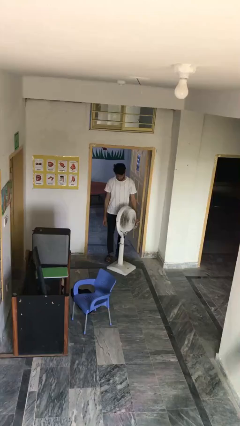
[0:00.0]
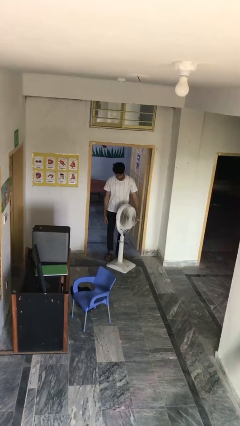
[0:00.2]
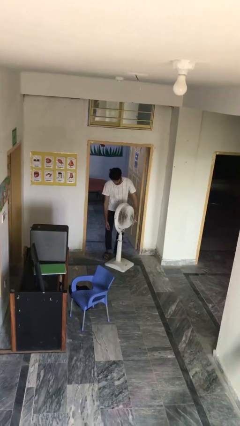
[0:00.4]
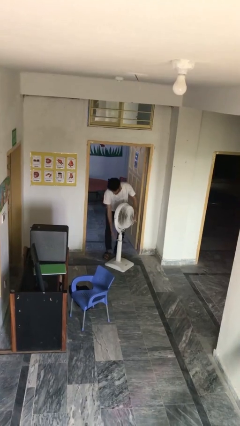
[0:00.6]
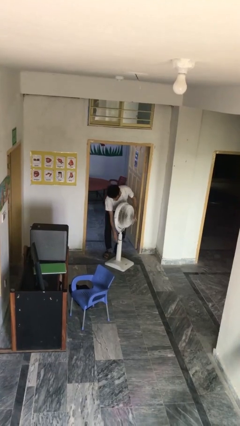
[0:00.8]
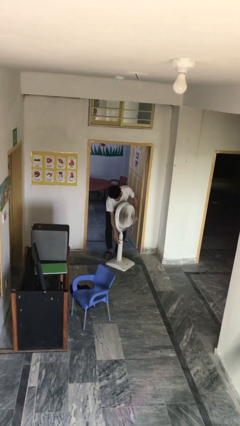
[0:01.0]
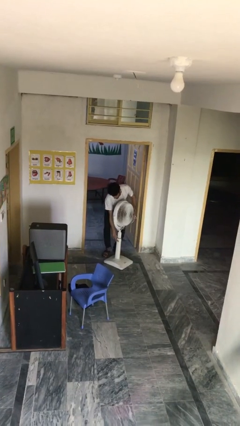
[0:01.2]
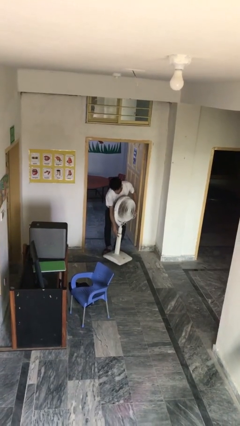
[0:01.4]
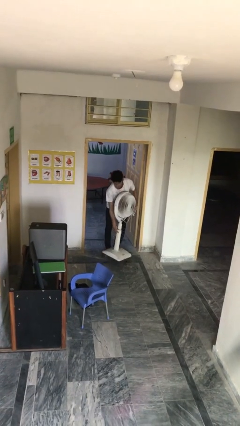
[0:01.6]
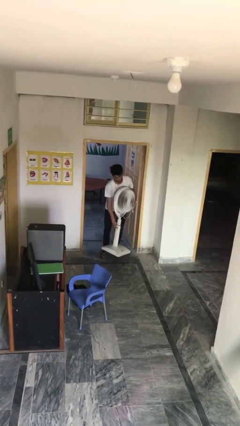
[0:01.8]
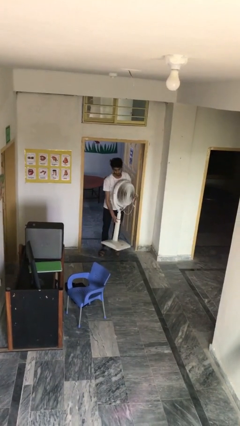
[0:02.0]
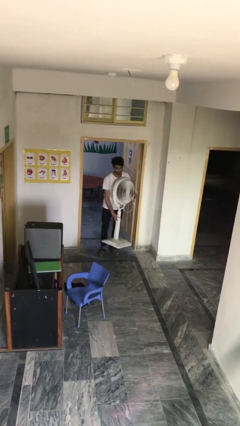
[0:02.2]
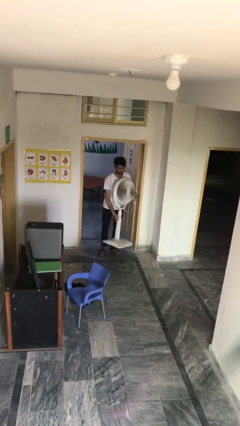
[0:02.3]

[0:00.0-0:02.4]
person picks up object from floor

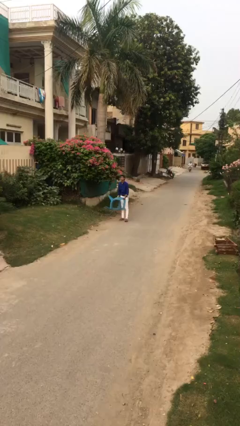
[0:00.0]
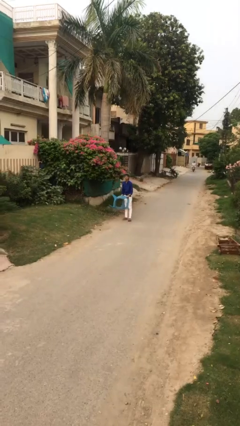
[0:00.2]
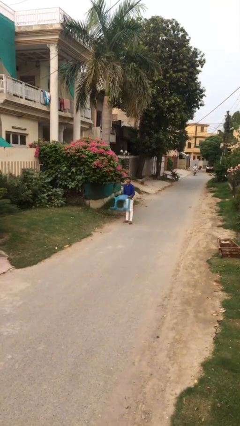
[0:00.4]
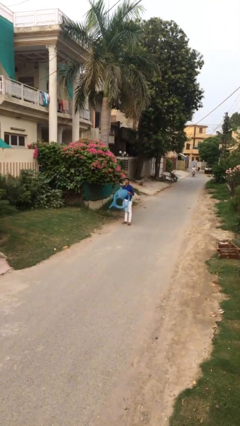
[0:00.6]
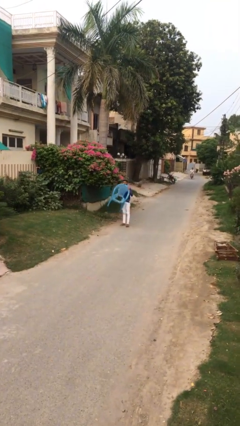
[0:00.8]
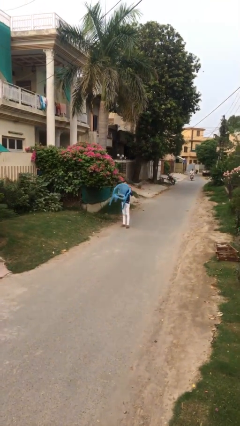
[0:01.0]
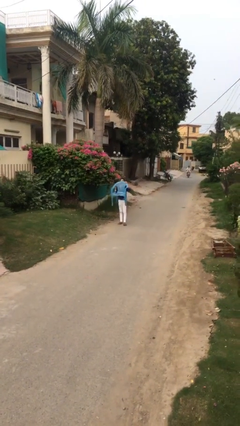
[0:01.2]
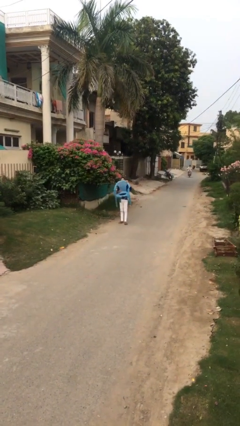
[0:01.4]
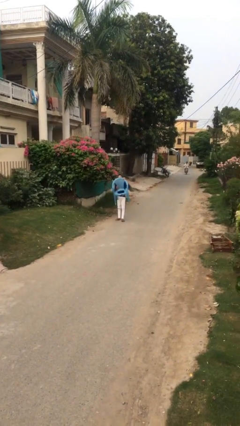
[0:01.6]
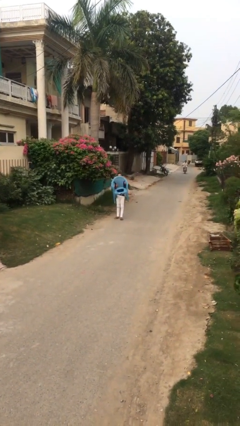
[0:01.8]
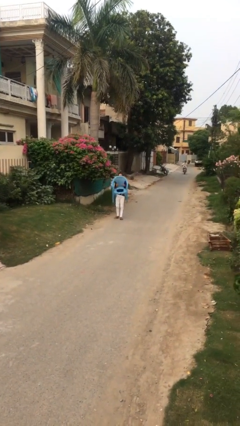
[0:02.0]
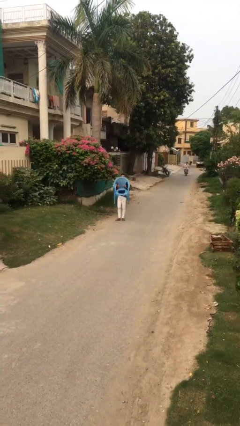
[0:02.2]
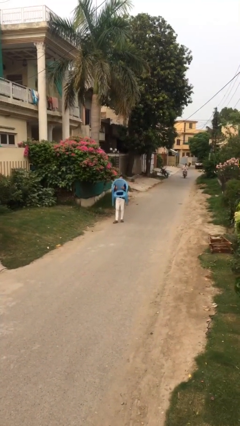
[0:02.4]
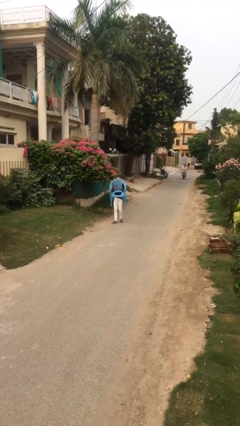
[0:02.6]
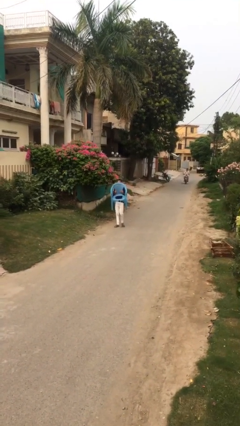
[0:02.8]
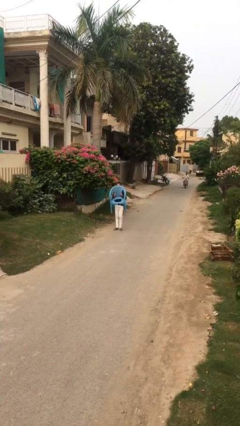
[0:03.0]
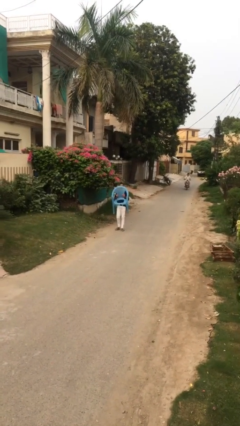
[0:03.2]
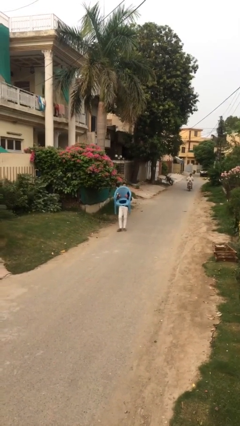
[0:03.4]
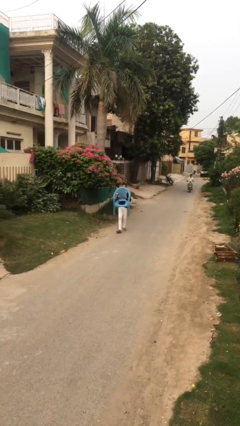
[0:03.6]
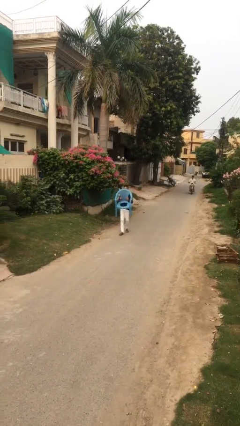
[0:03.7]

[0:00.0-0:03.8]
person carries heavy object

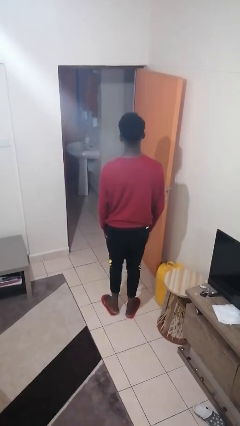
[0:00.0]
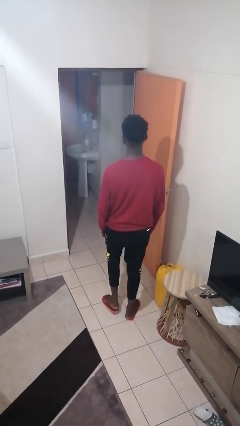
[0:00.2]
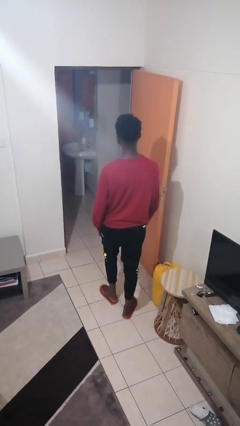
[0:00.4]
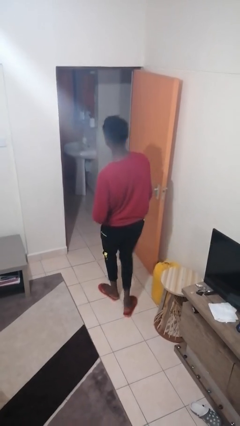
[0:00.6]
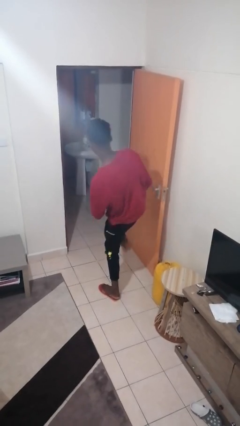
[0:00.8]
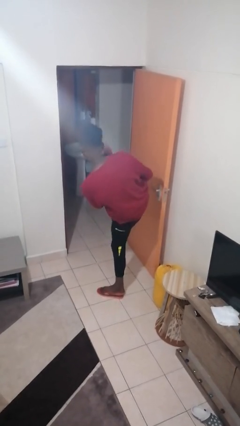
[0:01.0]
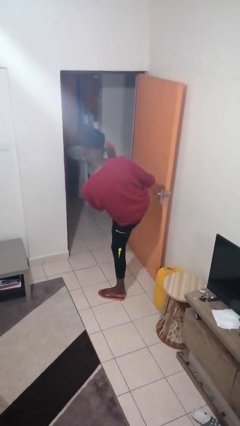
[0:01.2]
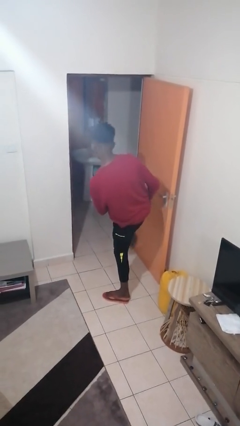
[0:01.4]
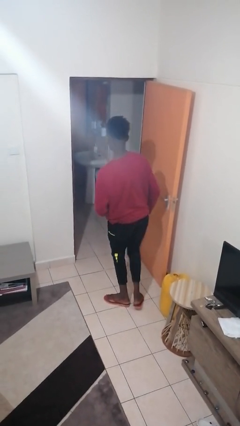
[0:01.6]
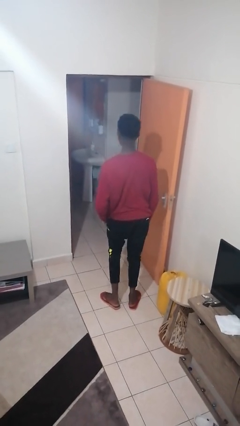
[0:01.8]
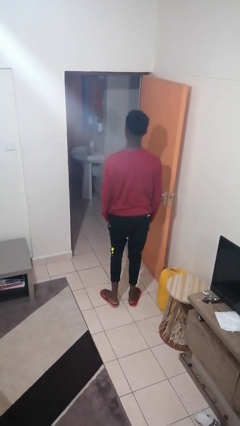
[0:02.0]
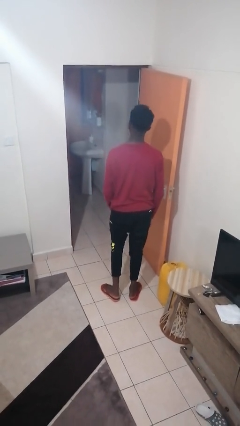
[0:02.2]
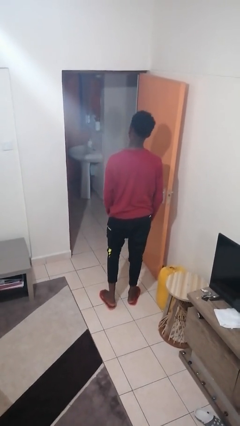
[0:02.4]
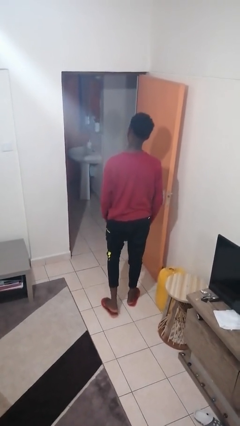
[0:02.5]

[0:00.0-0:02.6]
person karate kicks

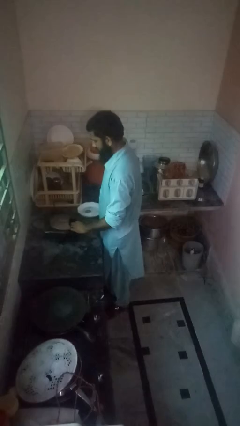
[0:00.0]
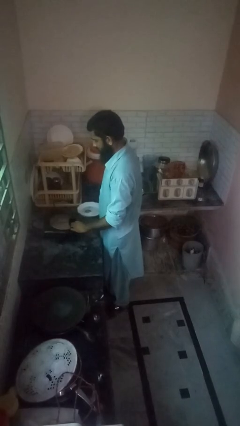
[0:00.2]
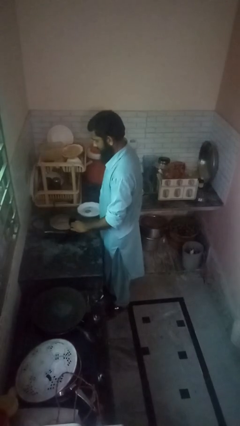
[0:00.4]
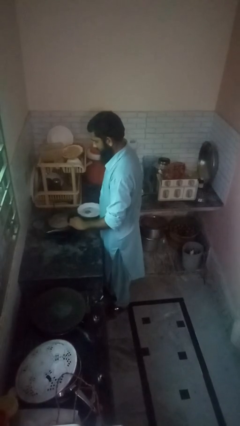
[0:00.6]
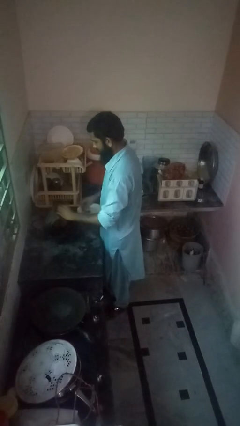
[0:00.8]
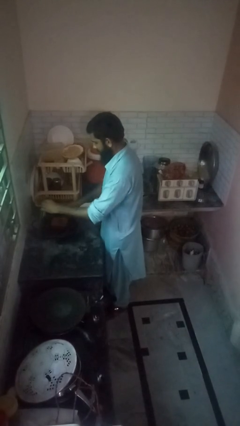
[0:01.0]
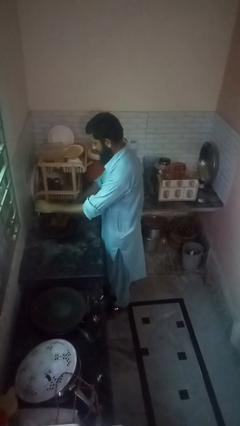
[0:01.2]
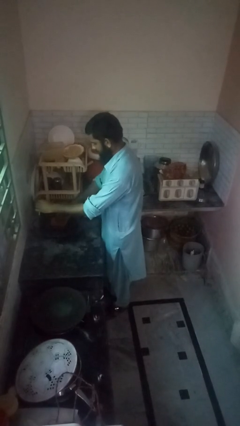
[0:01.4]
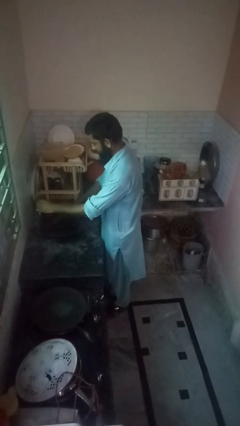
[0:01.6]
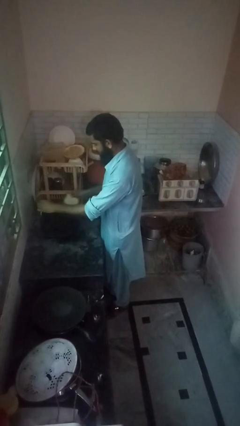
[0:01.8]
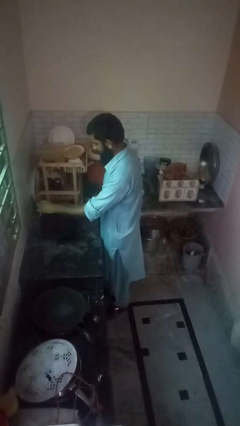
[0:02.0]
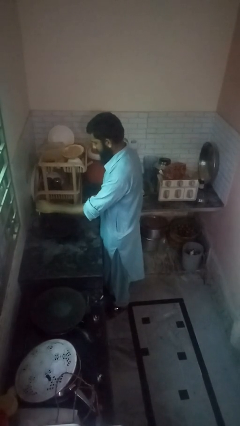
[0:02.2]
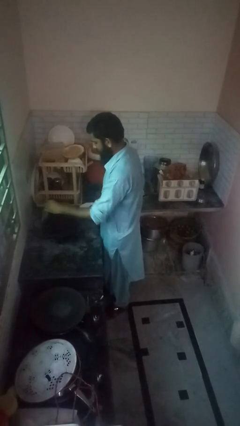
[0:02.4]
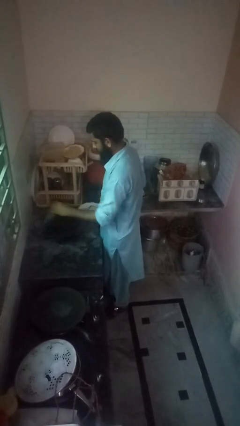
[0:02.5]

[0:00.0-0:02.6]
person takes object from toaster

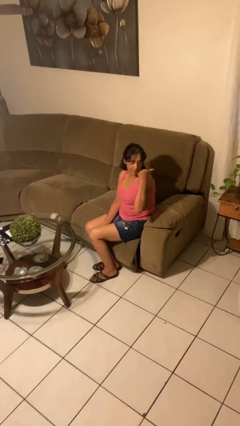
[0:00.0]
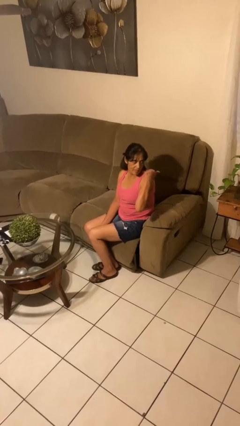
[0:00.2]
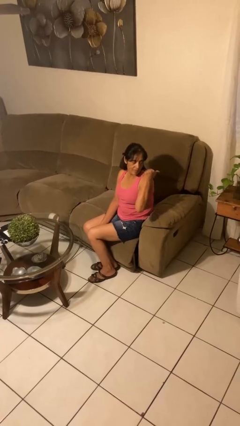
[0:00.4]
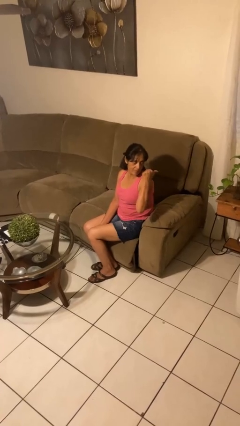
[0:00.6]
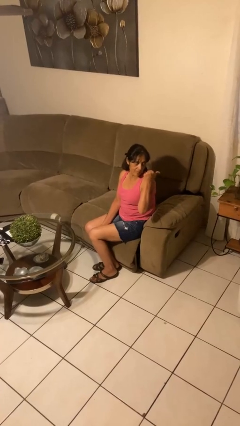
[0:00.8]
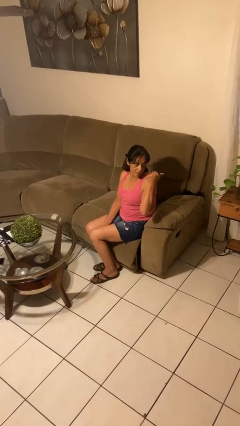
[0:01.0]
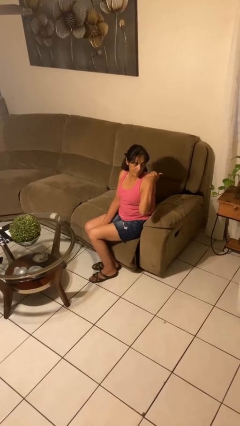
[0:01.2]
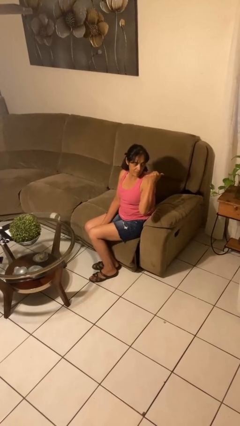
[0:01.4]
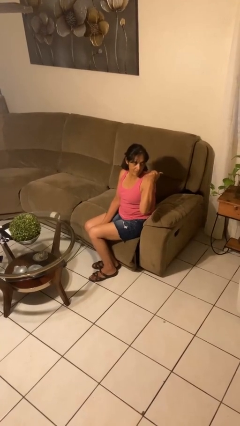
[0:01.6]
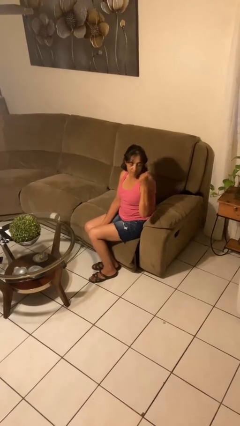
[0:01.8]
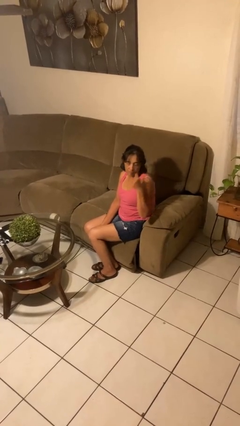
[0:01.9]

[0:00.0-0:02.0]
person gestures behind me

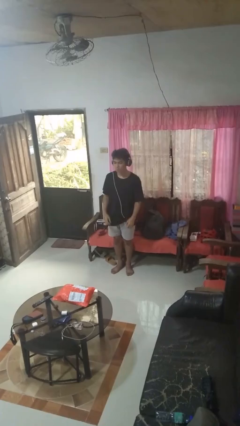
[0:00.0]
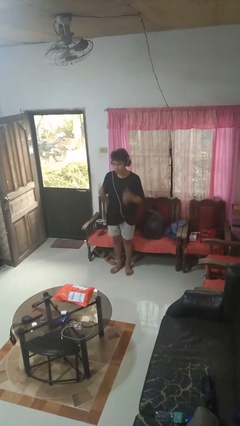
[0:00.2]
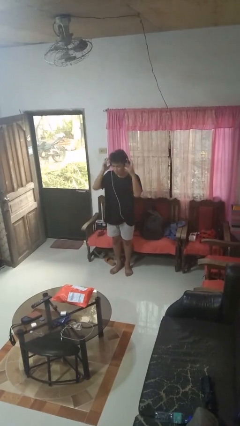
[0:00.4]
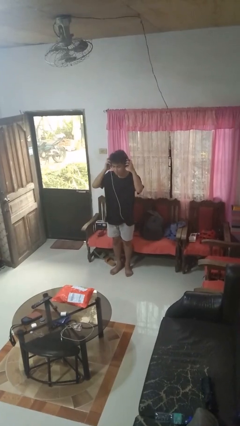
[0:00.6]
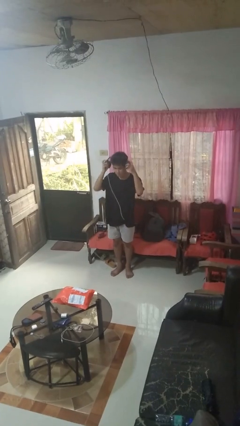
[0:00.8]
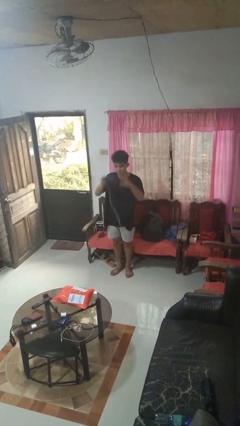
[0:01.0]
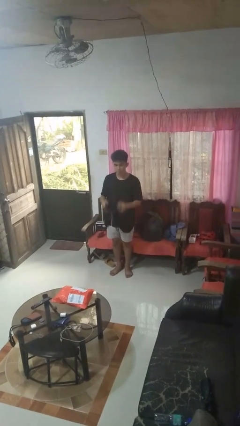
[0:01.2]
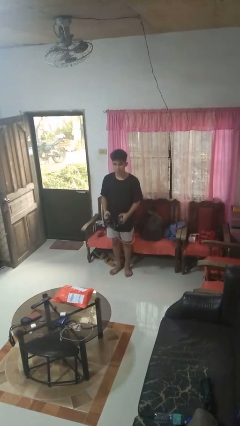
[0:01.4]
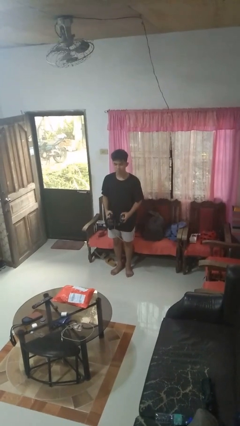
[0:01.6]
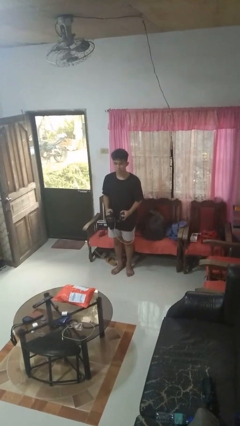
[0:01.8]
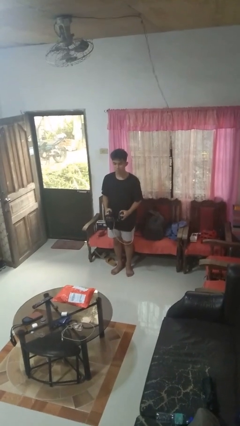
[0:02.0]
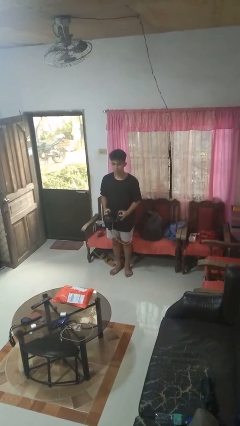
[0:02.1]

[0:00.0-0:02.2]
person takes off headphones

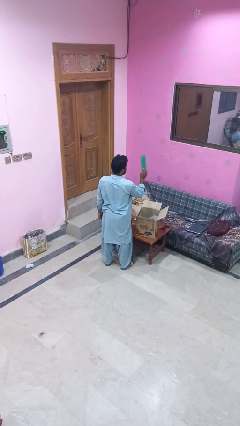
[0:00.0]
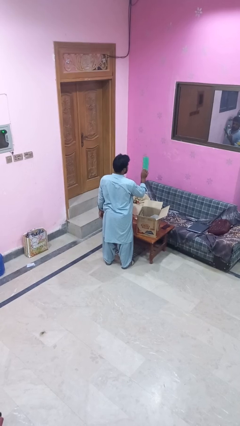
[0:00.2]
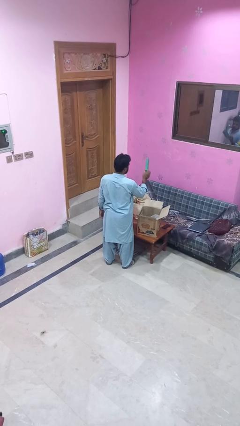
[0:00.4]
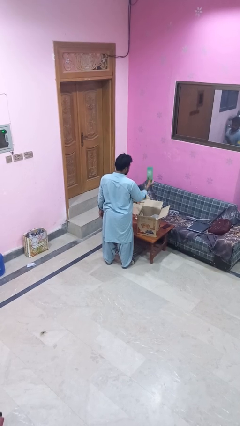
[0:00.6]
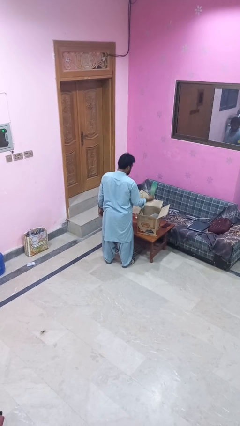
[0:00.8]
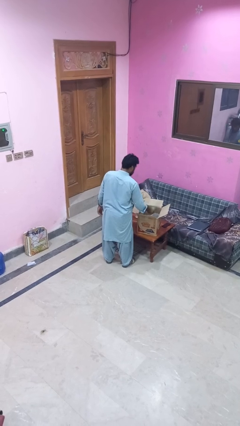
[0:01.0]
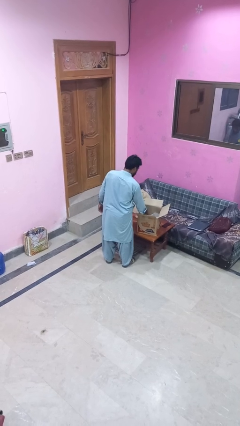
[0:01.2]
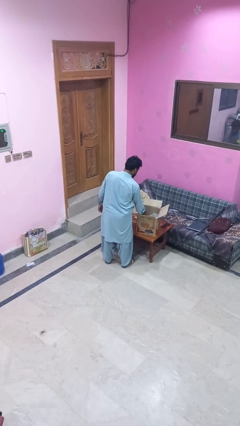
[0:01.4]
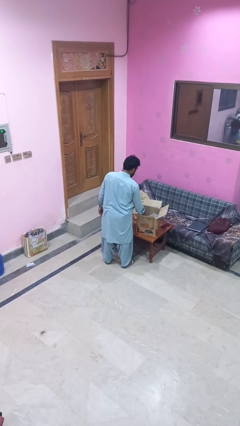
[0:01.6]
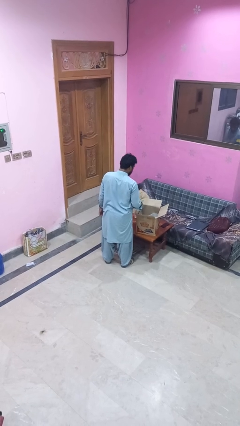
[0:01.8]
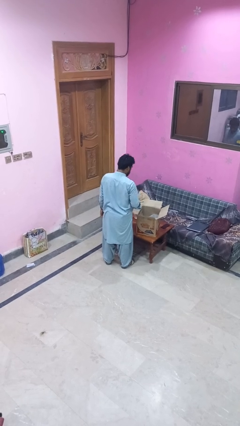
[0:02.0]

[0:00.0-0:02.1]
person puts object into box
